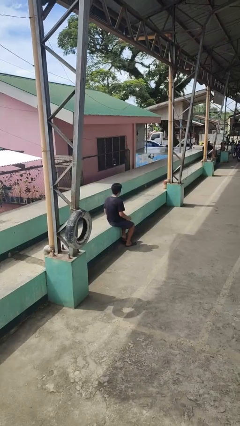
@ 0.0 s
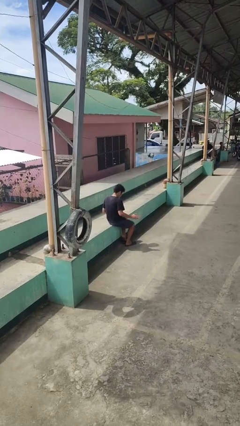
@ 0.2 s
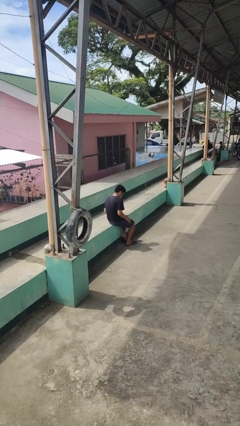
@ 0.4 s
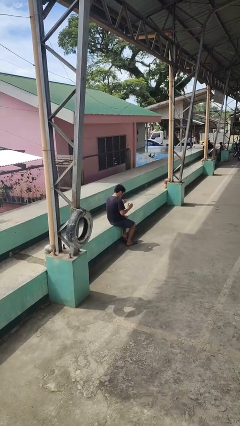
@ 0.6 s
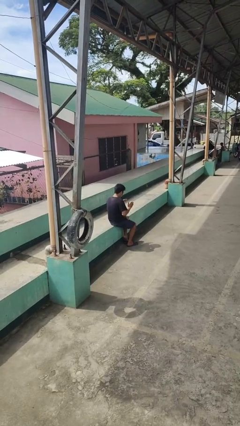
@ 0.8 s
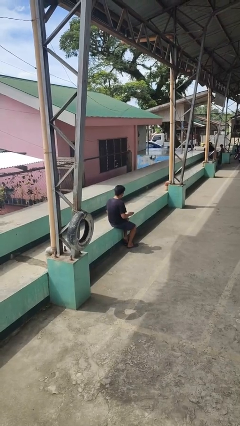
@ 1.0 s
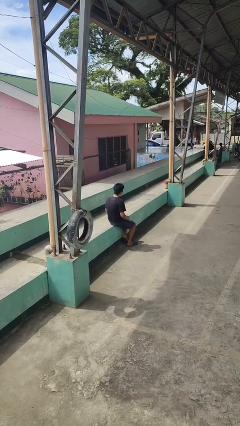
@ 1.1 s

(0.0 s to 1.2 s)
person slaps hands on thighs

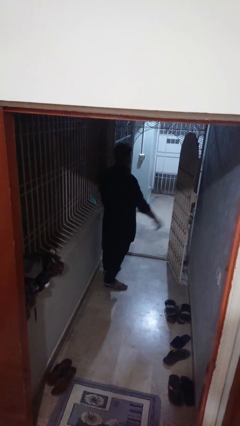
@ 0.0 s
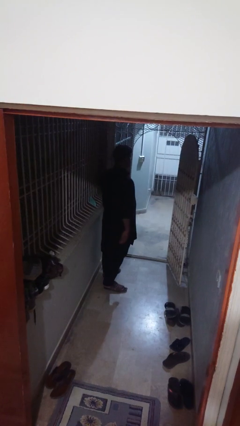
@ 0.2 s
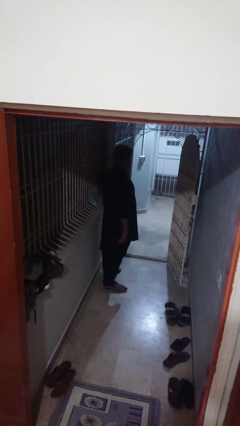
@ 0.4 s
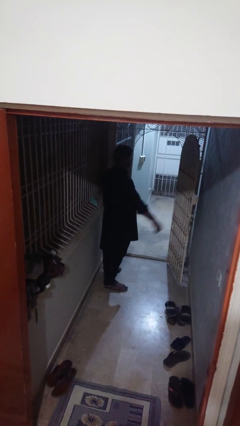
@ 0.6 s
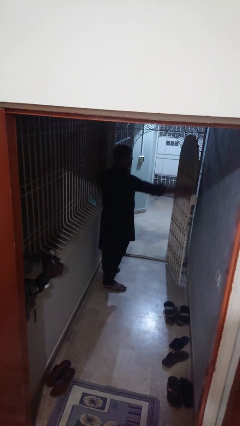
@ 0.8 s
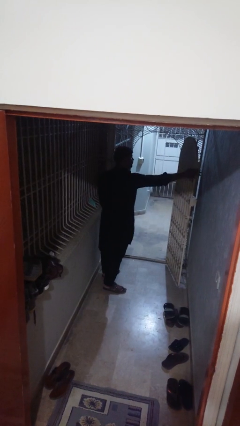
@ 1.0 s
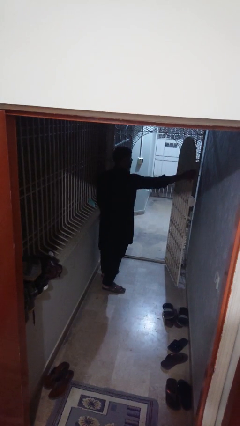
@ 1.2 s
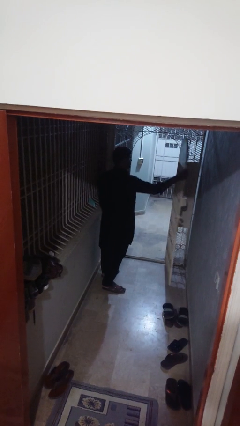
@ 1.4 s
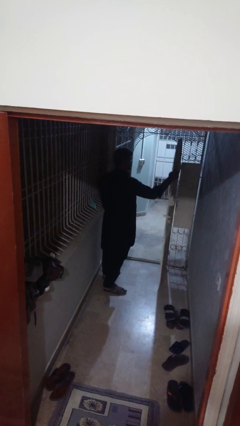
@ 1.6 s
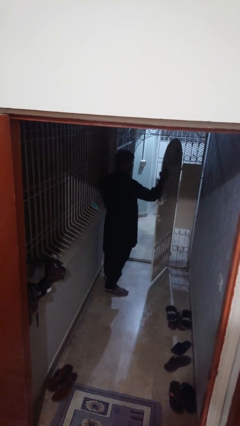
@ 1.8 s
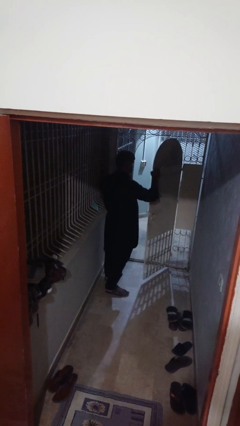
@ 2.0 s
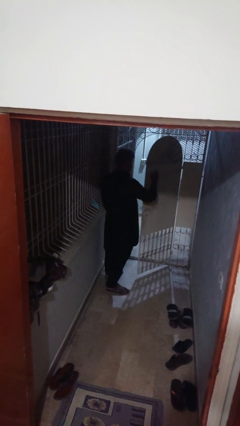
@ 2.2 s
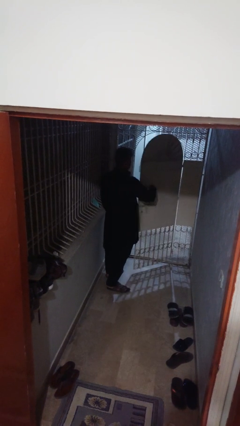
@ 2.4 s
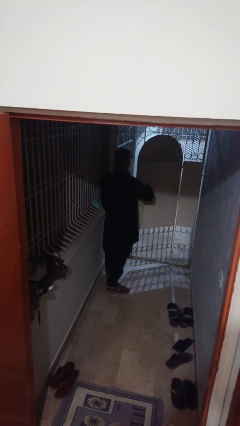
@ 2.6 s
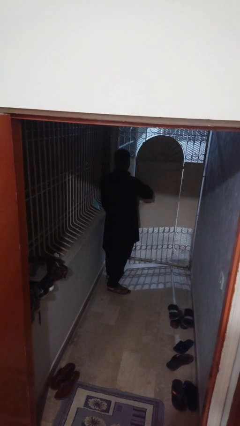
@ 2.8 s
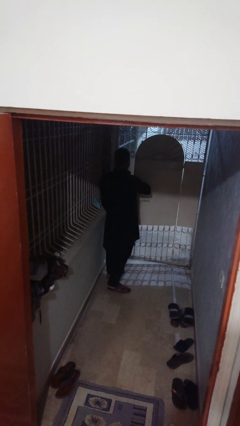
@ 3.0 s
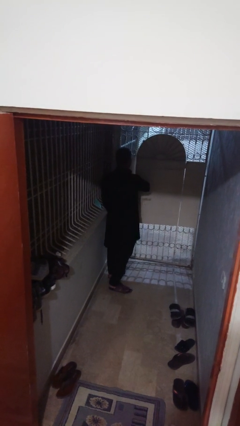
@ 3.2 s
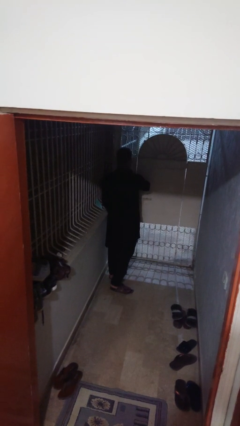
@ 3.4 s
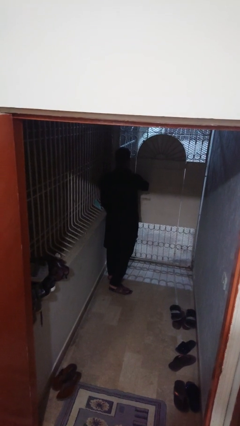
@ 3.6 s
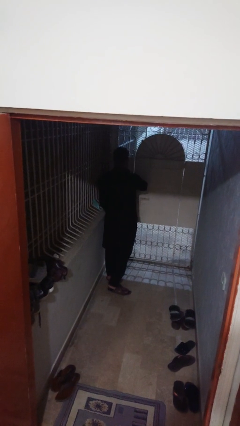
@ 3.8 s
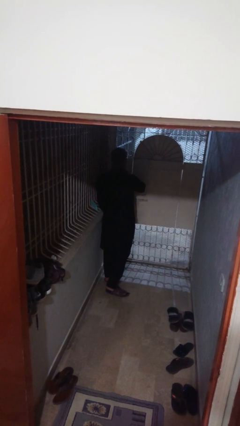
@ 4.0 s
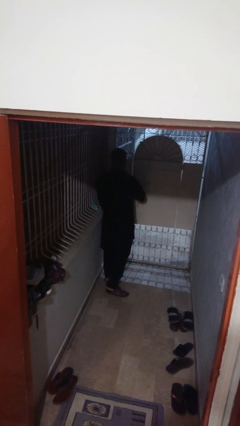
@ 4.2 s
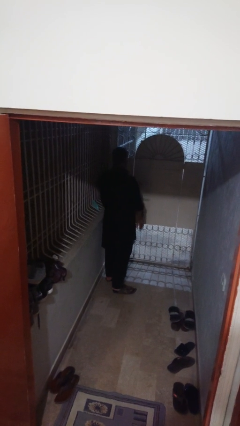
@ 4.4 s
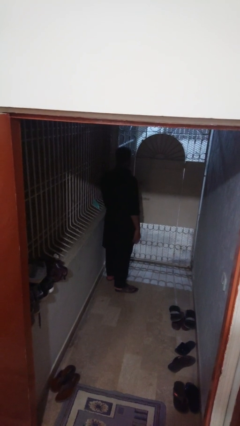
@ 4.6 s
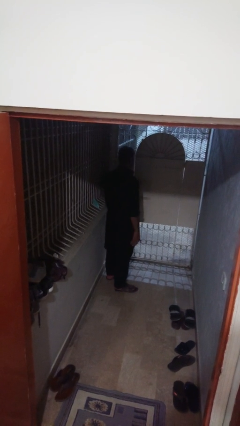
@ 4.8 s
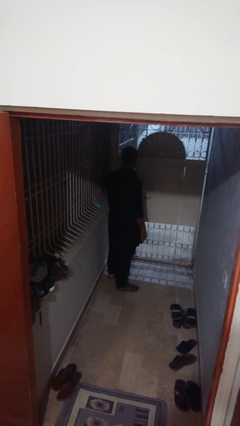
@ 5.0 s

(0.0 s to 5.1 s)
person closes gate

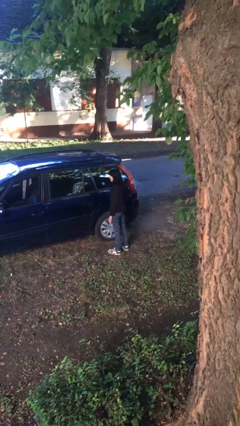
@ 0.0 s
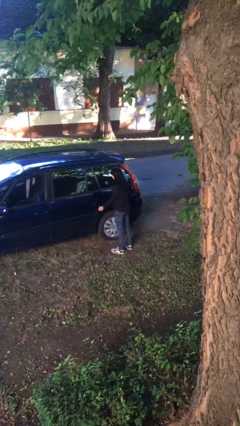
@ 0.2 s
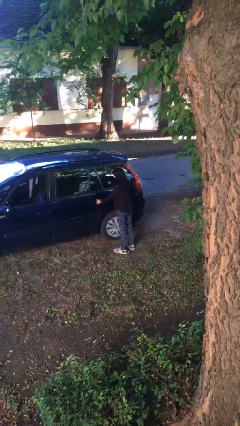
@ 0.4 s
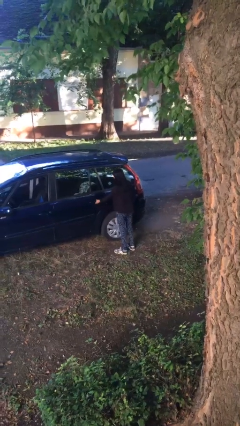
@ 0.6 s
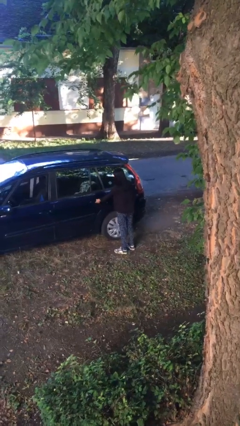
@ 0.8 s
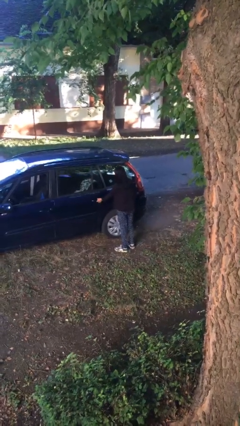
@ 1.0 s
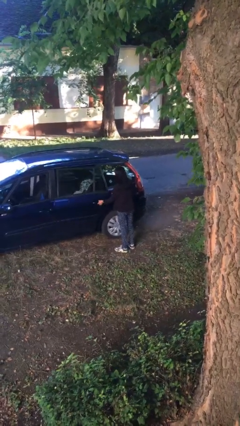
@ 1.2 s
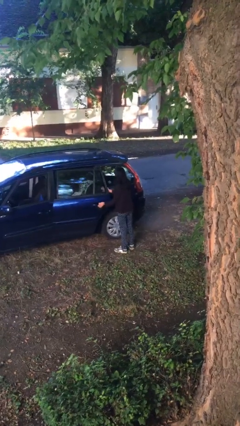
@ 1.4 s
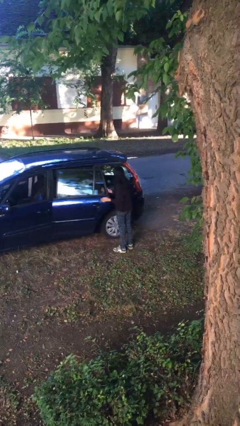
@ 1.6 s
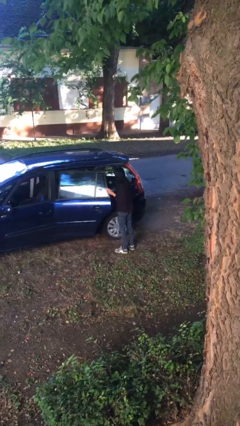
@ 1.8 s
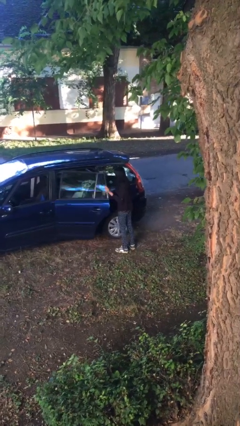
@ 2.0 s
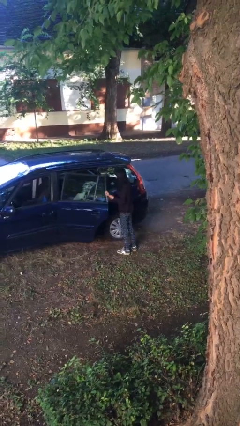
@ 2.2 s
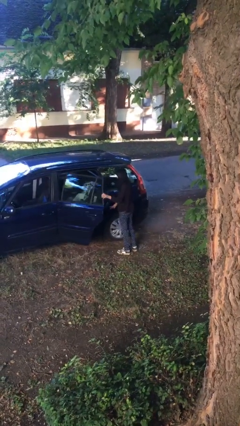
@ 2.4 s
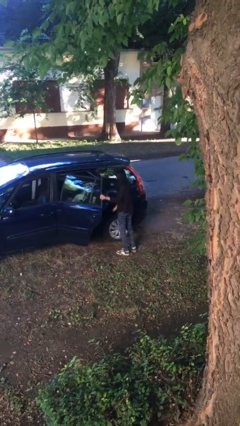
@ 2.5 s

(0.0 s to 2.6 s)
person opens car door

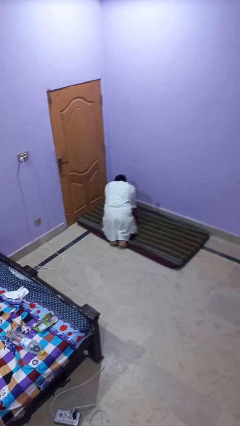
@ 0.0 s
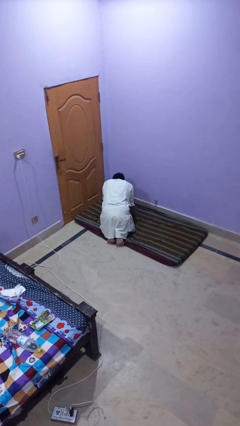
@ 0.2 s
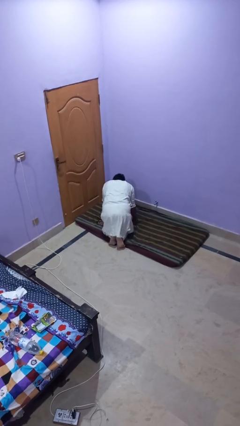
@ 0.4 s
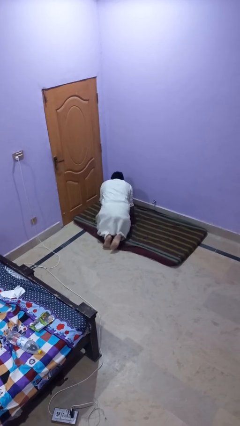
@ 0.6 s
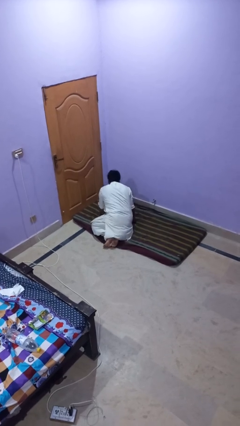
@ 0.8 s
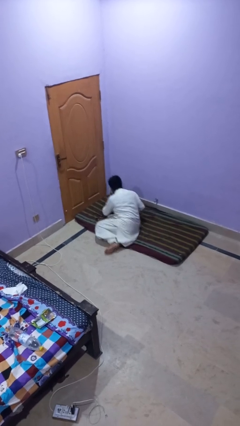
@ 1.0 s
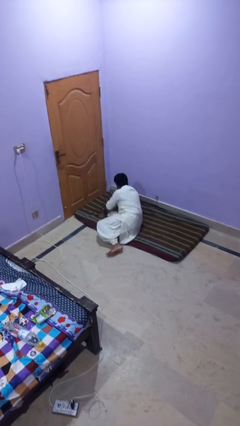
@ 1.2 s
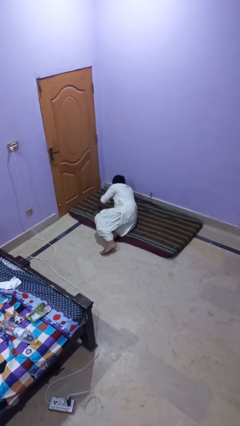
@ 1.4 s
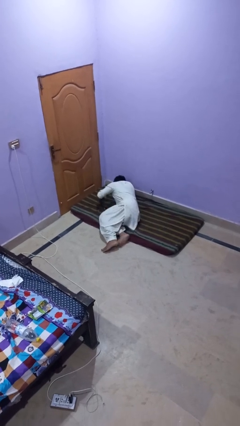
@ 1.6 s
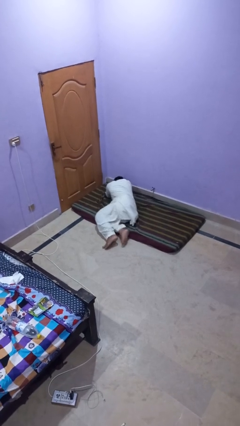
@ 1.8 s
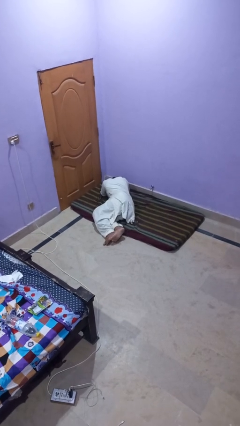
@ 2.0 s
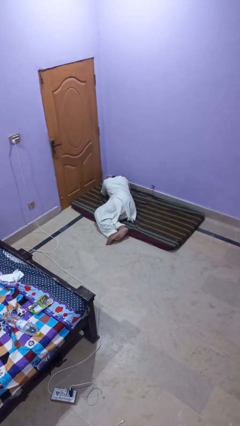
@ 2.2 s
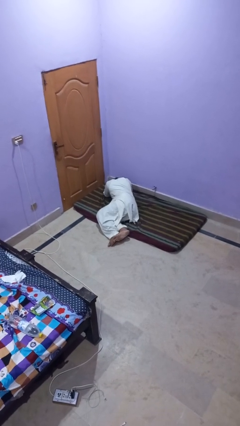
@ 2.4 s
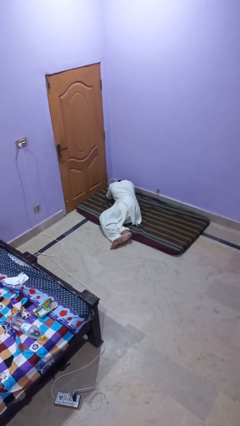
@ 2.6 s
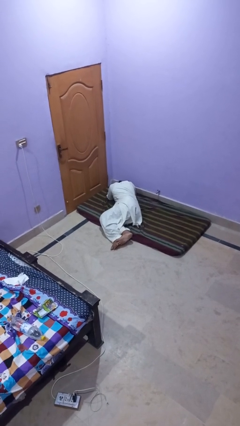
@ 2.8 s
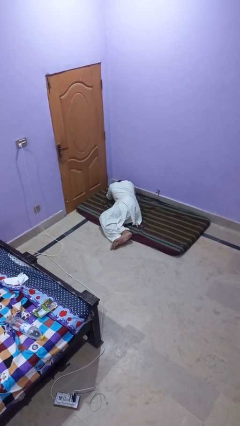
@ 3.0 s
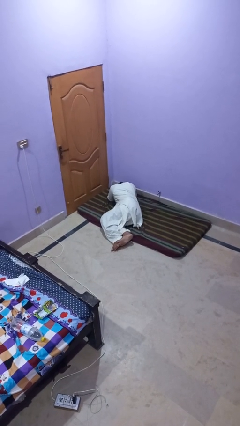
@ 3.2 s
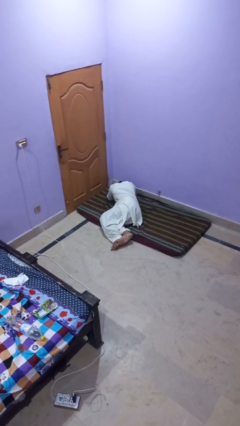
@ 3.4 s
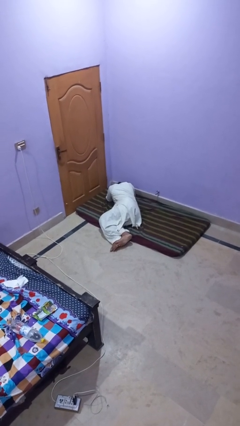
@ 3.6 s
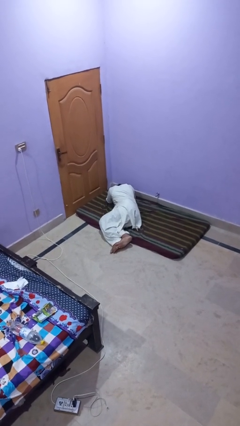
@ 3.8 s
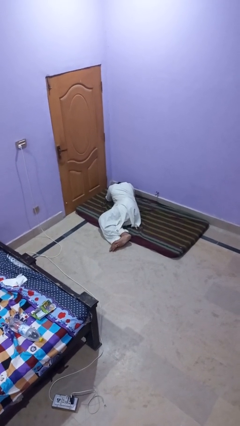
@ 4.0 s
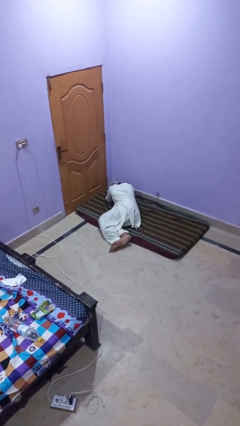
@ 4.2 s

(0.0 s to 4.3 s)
person lies down on floor

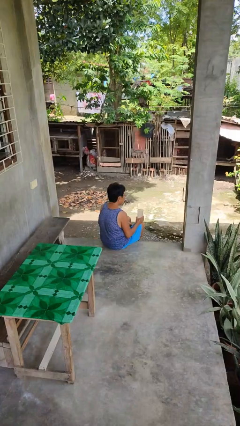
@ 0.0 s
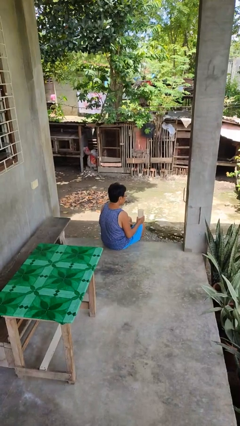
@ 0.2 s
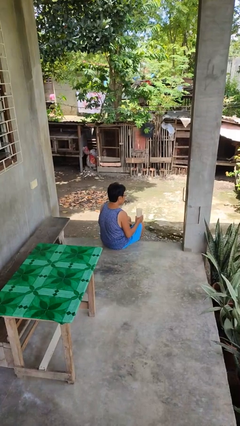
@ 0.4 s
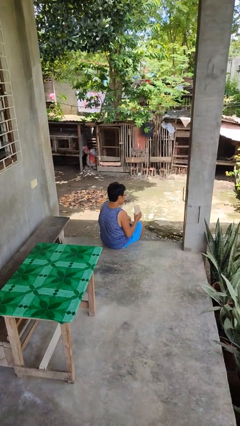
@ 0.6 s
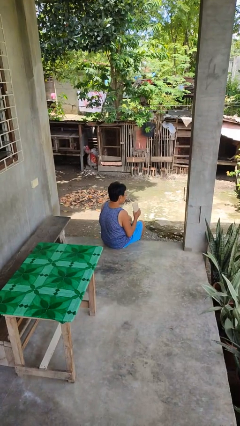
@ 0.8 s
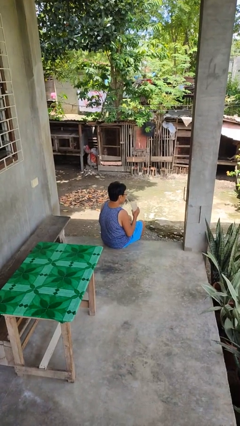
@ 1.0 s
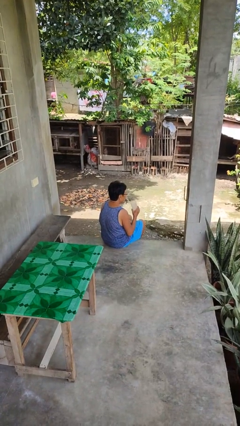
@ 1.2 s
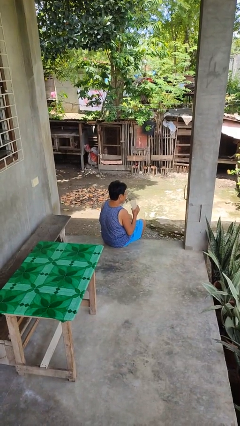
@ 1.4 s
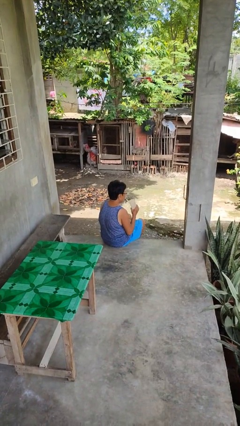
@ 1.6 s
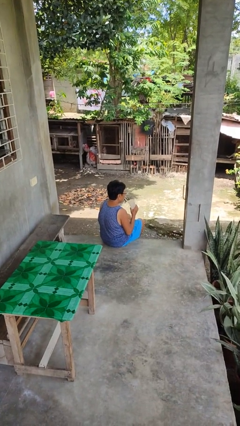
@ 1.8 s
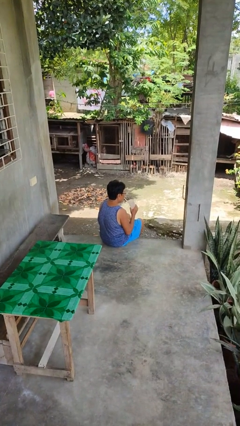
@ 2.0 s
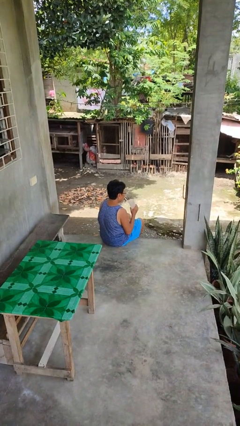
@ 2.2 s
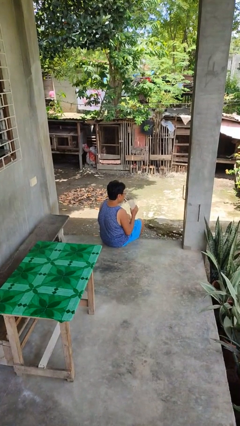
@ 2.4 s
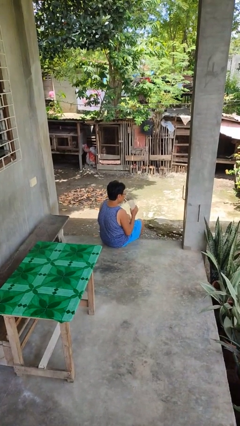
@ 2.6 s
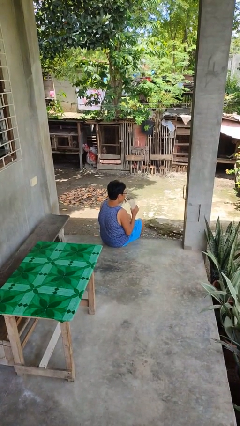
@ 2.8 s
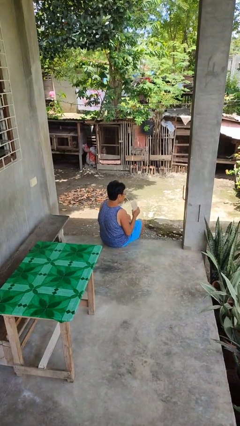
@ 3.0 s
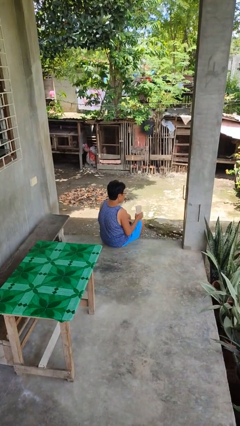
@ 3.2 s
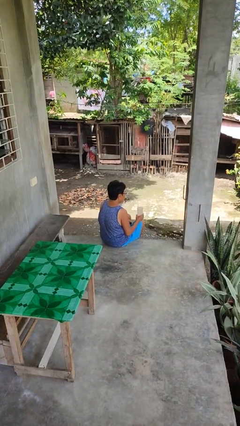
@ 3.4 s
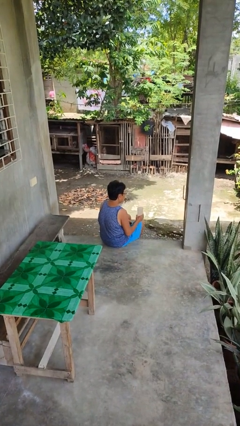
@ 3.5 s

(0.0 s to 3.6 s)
person drinks from straw

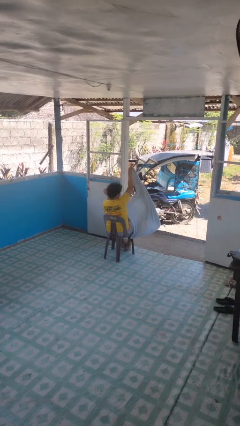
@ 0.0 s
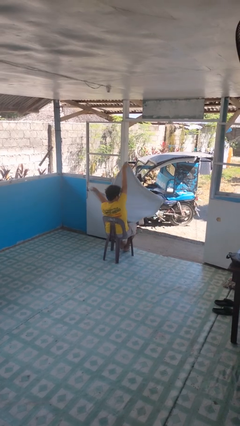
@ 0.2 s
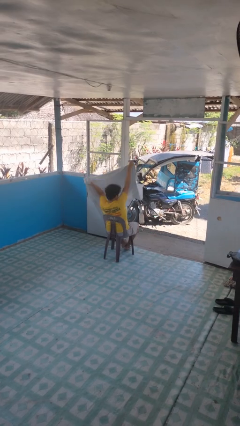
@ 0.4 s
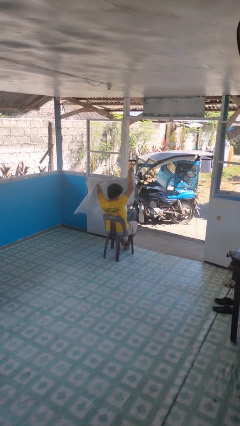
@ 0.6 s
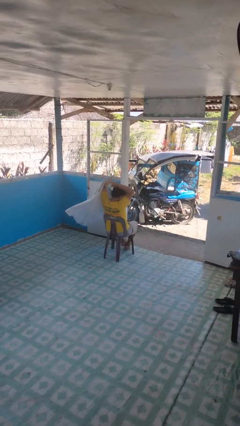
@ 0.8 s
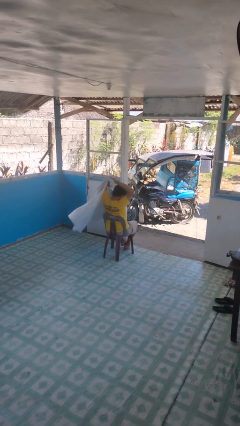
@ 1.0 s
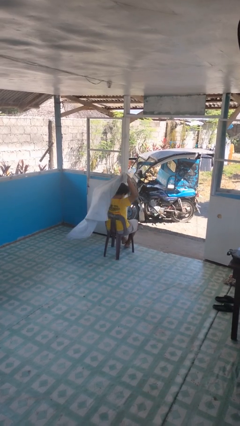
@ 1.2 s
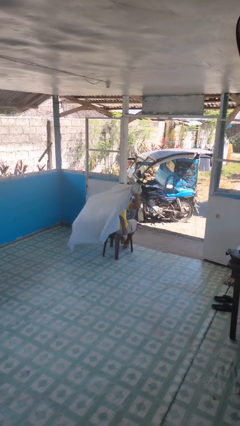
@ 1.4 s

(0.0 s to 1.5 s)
person covers with blanket
